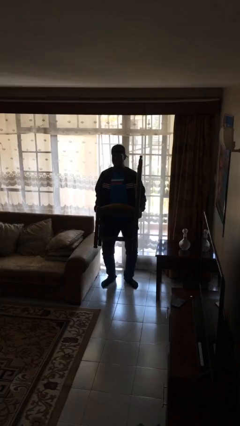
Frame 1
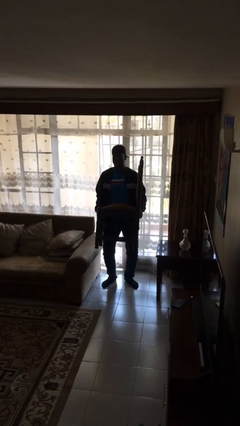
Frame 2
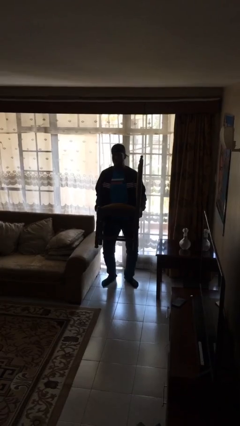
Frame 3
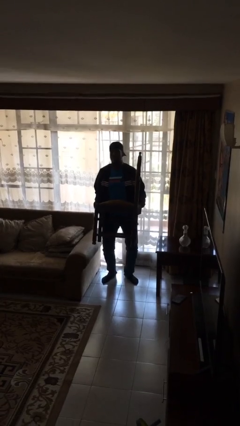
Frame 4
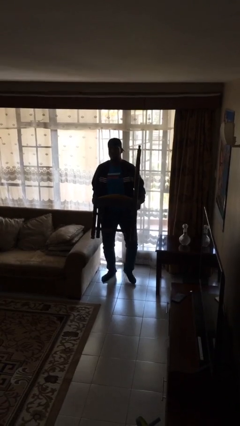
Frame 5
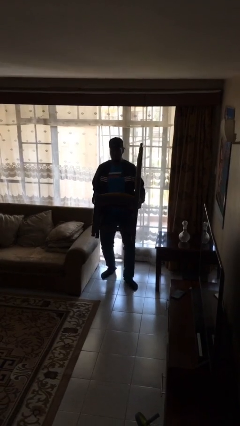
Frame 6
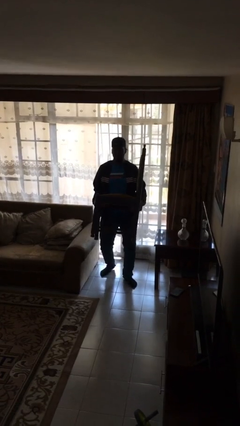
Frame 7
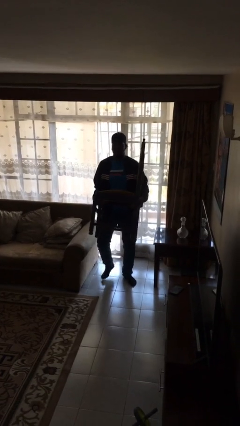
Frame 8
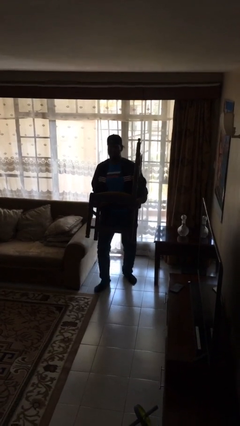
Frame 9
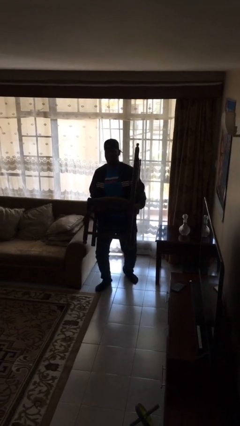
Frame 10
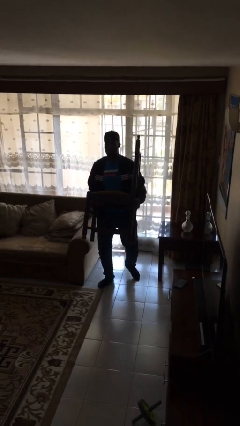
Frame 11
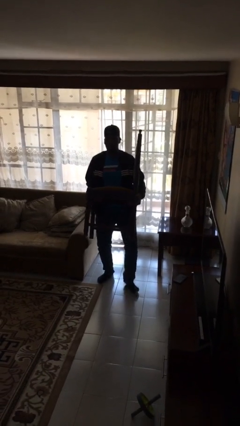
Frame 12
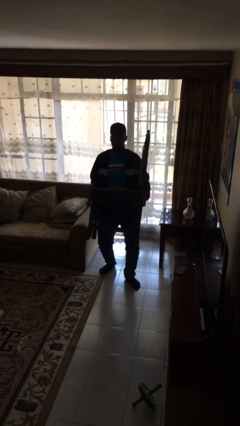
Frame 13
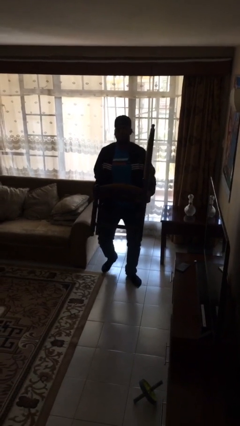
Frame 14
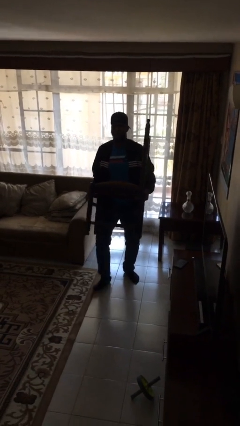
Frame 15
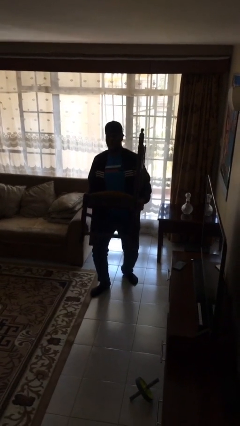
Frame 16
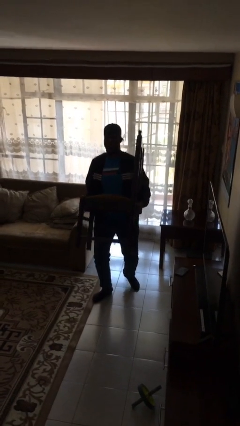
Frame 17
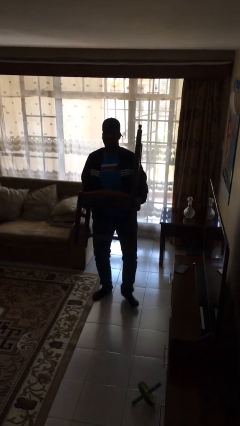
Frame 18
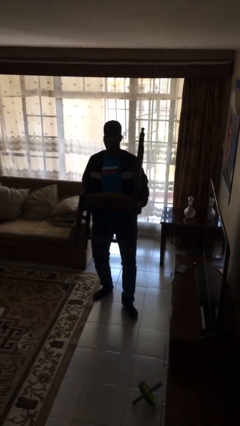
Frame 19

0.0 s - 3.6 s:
person carries heavy object

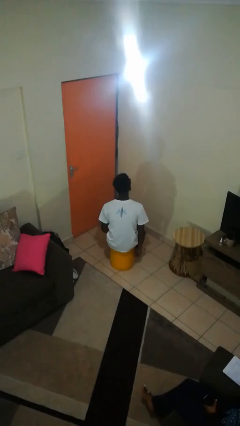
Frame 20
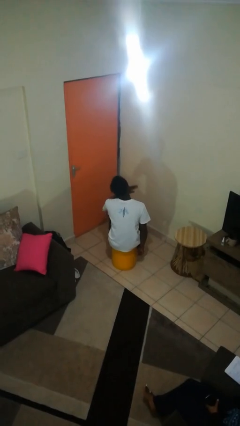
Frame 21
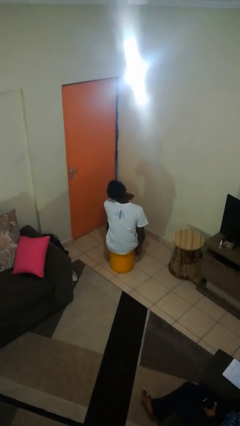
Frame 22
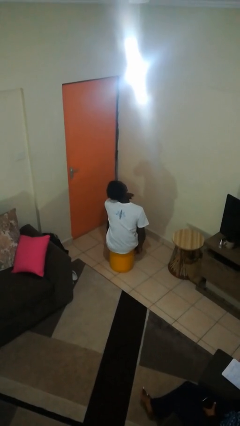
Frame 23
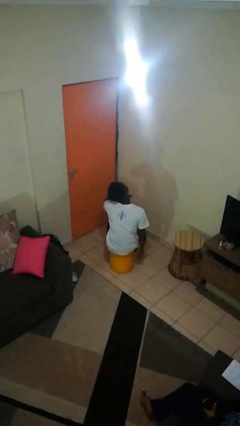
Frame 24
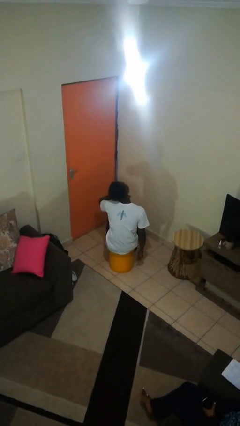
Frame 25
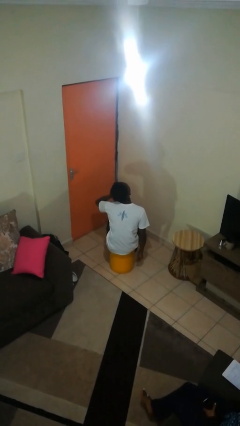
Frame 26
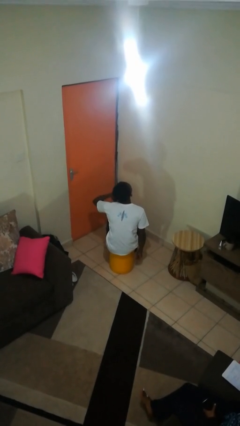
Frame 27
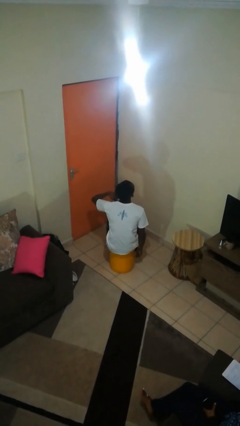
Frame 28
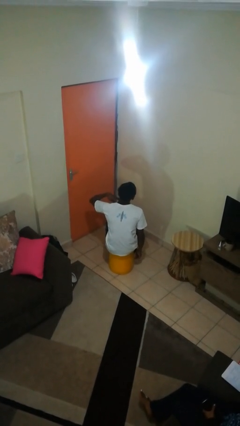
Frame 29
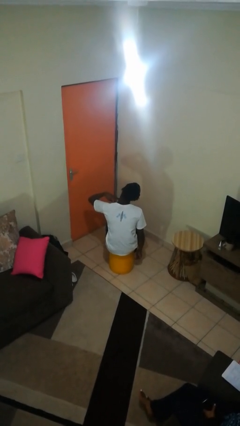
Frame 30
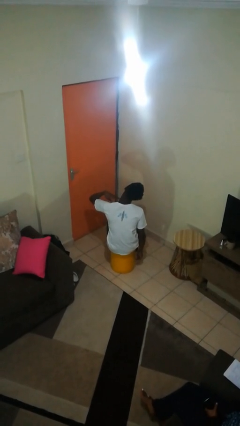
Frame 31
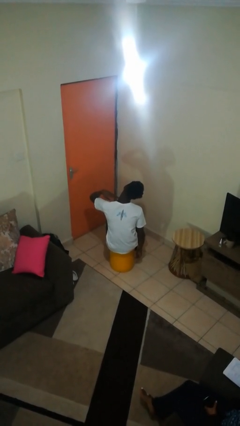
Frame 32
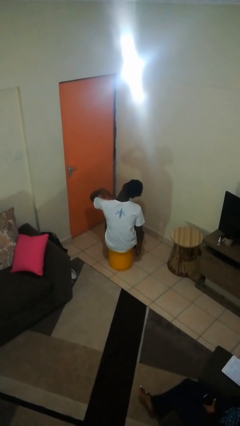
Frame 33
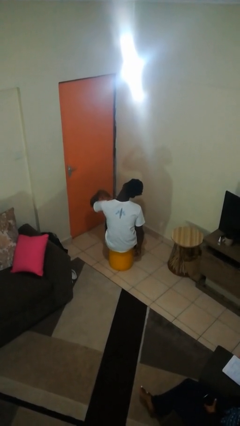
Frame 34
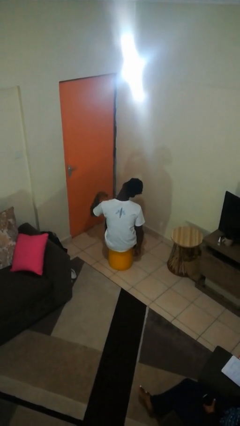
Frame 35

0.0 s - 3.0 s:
person gestures cut

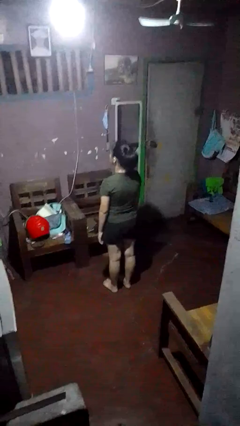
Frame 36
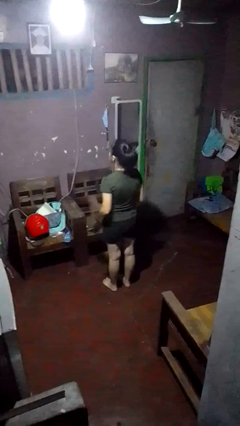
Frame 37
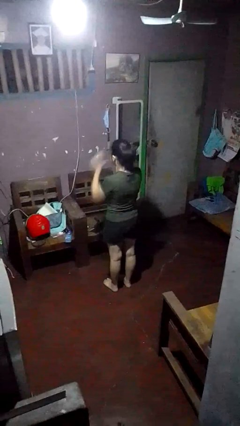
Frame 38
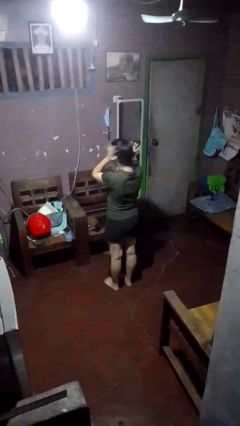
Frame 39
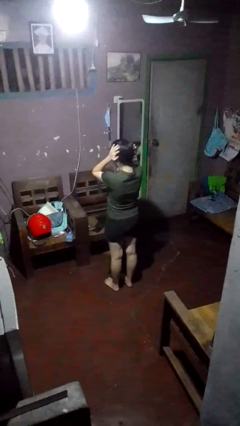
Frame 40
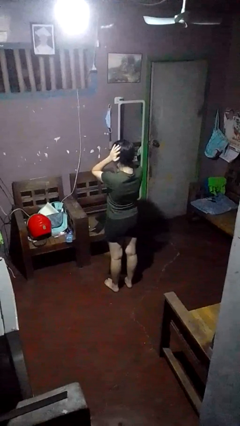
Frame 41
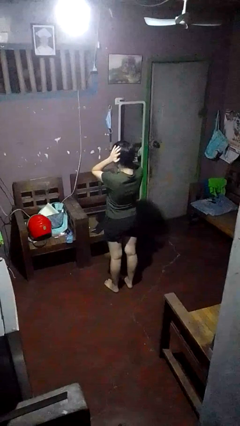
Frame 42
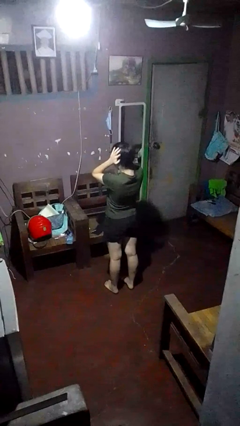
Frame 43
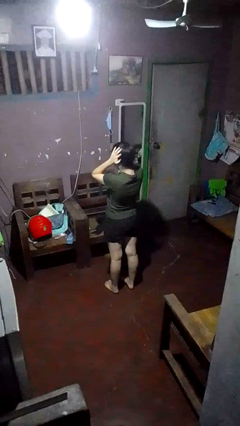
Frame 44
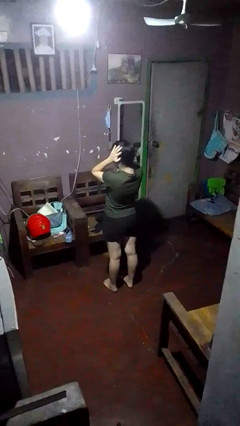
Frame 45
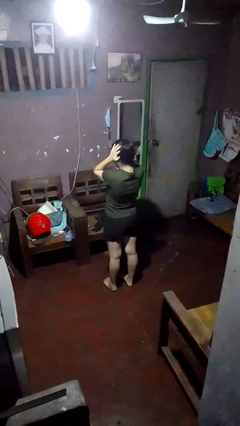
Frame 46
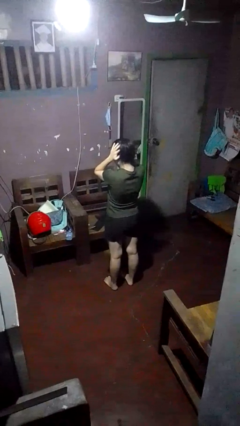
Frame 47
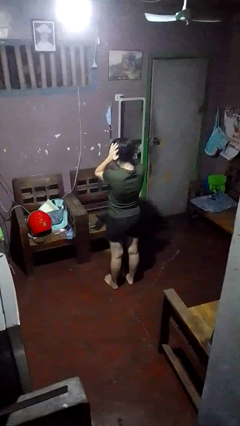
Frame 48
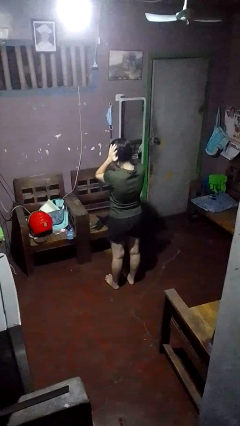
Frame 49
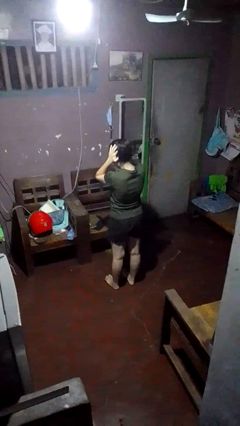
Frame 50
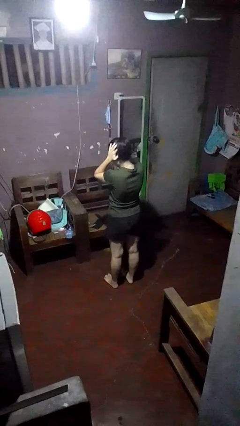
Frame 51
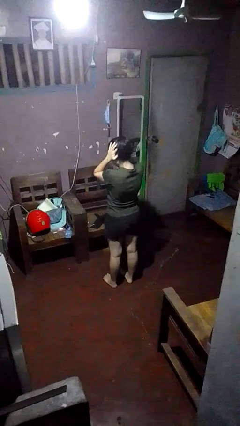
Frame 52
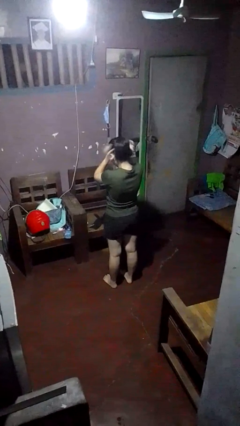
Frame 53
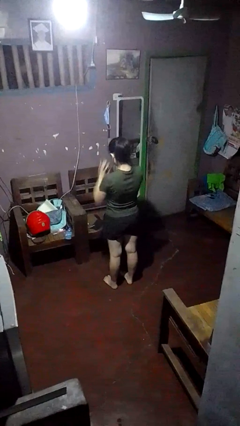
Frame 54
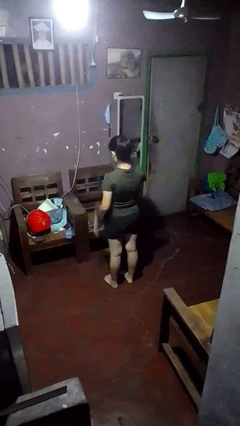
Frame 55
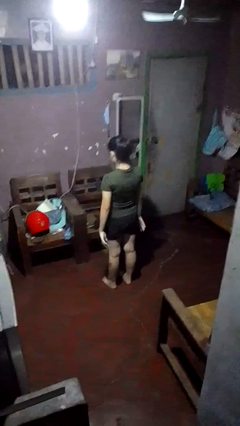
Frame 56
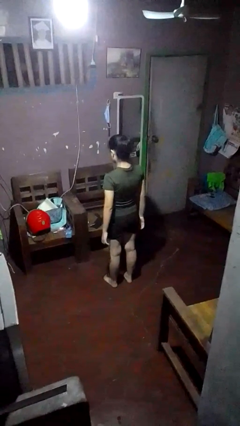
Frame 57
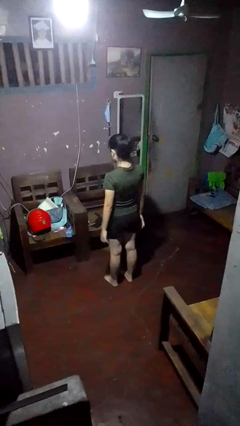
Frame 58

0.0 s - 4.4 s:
person puts fingers in ear

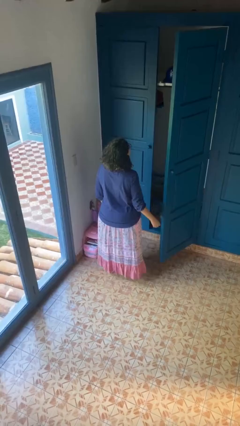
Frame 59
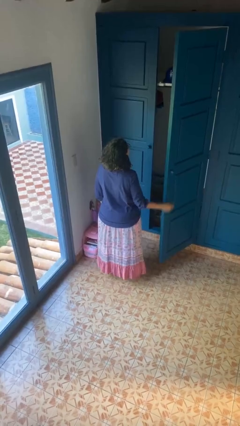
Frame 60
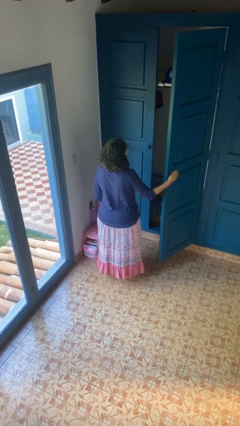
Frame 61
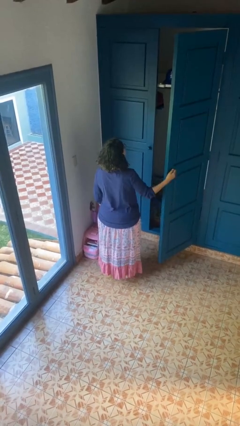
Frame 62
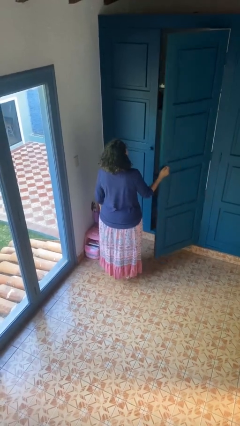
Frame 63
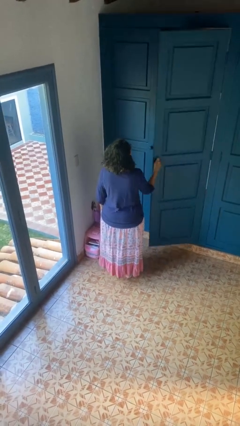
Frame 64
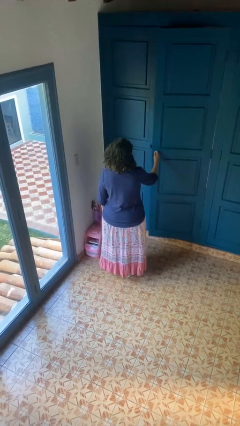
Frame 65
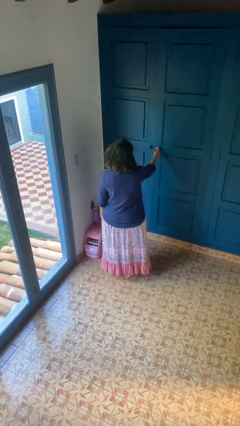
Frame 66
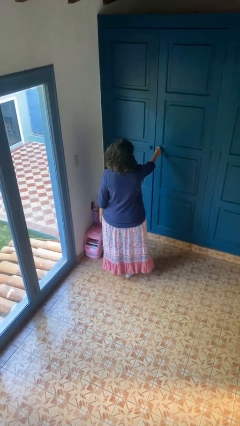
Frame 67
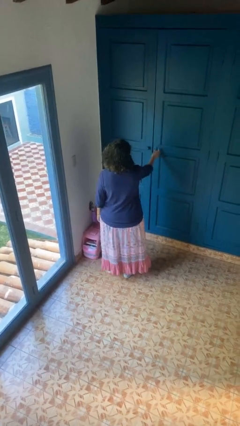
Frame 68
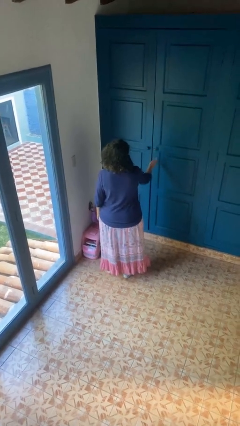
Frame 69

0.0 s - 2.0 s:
person closes closet door

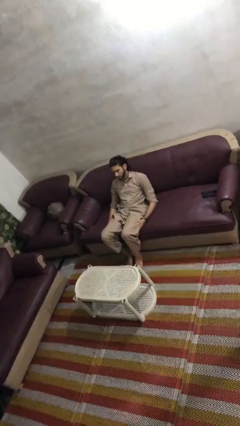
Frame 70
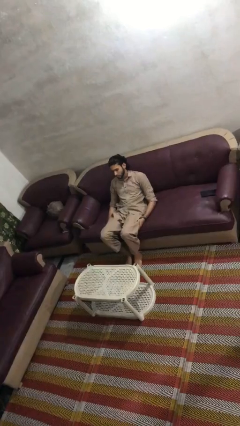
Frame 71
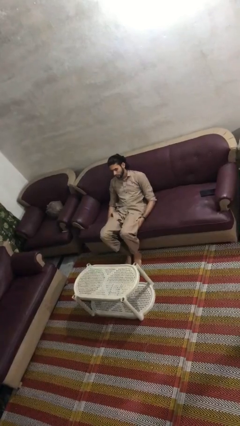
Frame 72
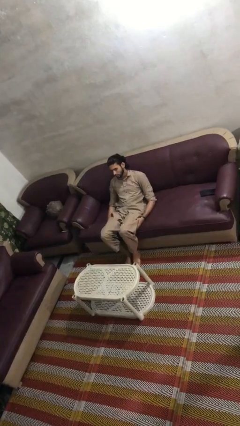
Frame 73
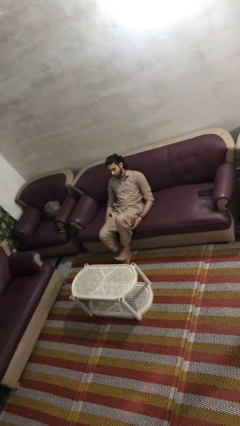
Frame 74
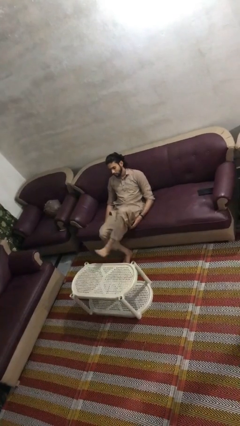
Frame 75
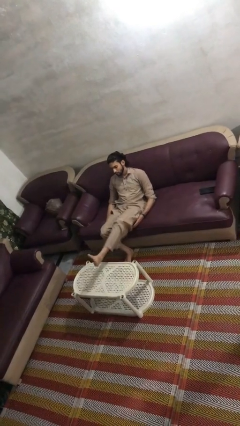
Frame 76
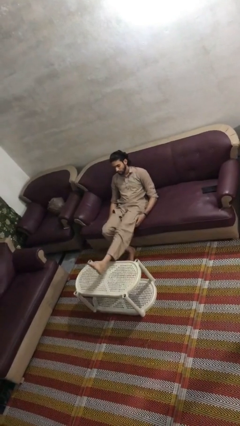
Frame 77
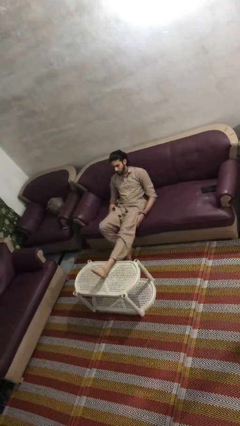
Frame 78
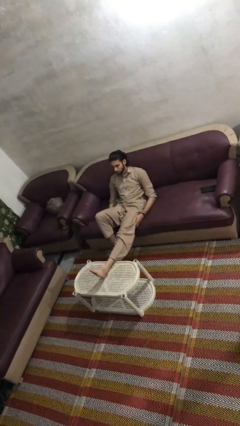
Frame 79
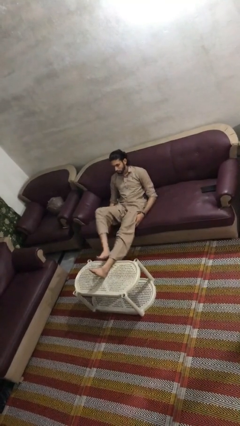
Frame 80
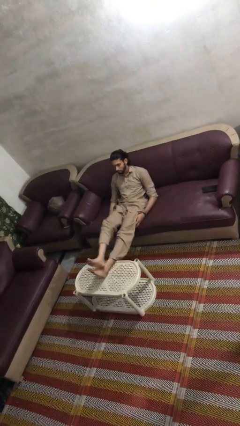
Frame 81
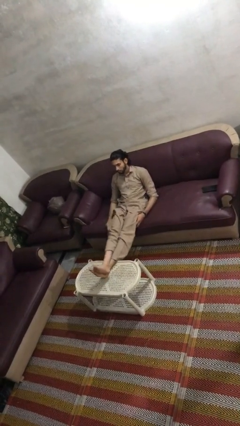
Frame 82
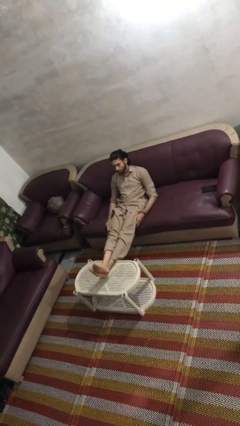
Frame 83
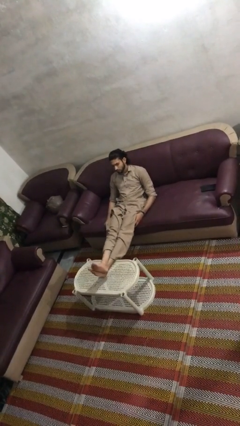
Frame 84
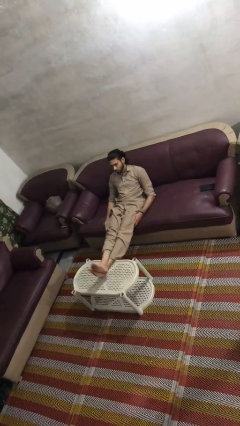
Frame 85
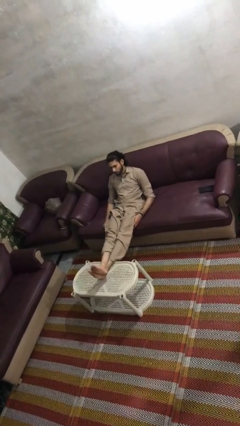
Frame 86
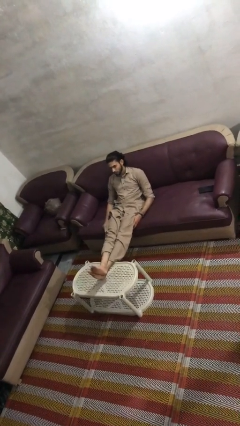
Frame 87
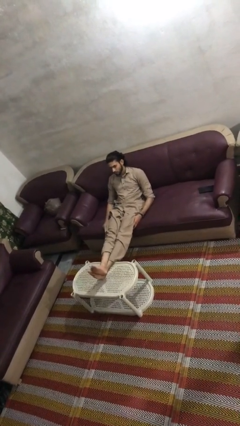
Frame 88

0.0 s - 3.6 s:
person puts feet up

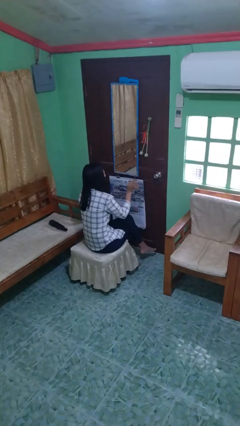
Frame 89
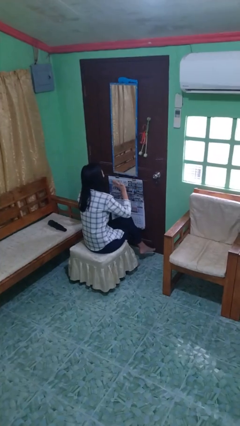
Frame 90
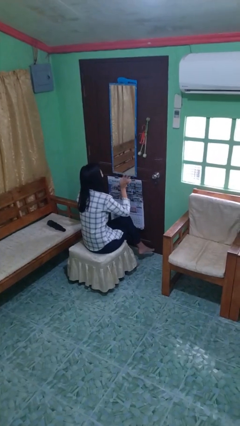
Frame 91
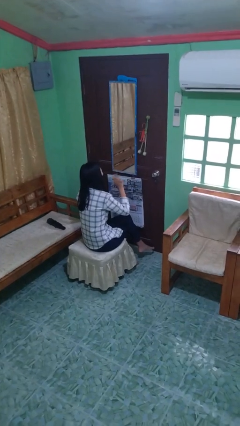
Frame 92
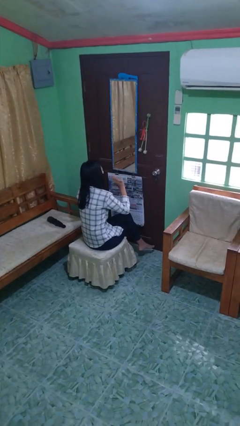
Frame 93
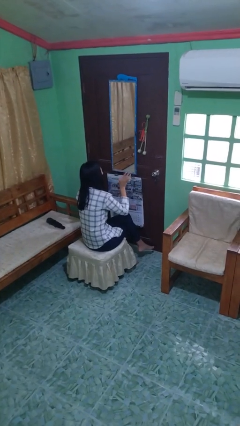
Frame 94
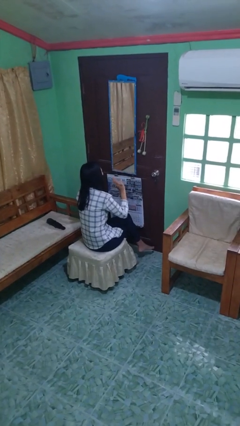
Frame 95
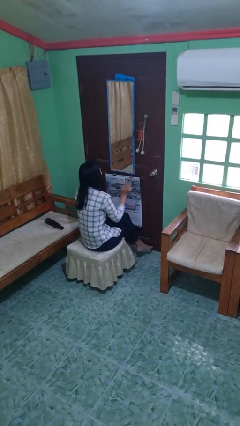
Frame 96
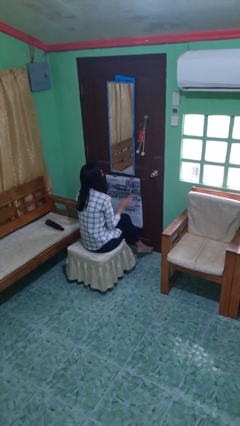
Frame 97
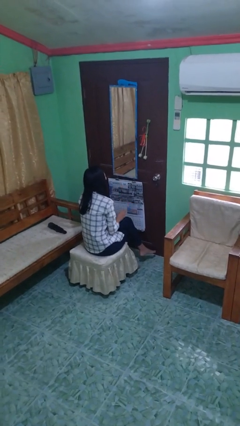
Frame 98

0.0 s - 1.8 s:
person waves hand over object
